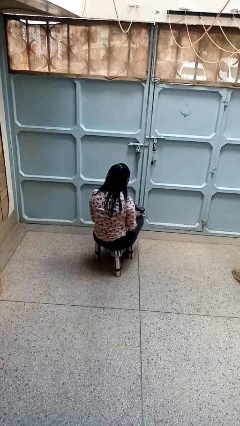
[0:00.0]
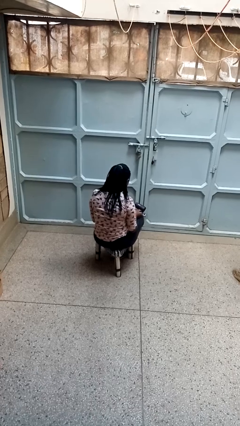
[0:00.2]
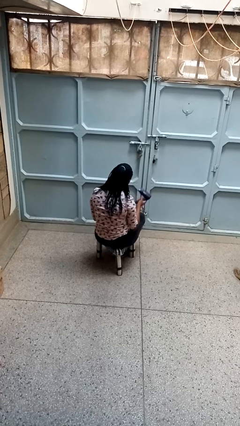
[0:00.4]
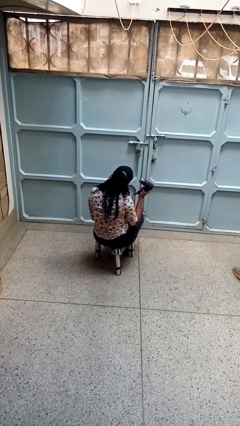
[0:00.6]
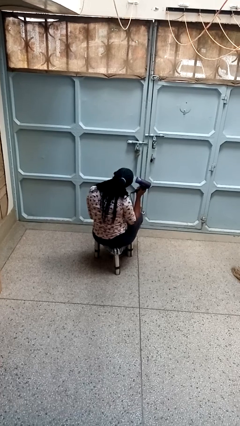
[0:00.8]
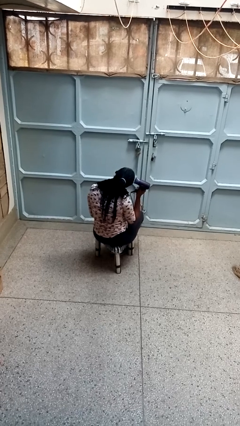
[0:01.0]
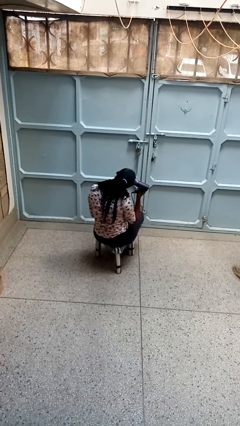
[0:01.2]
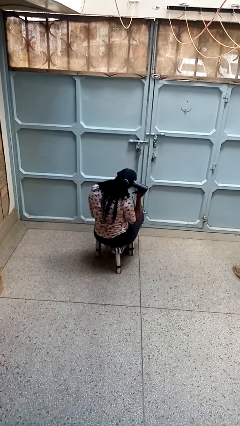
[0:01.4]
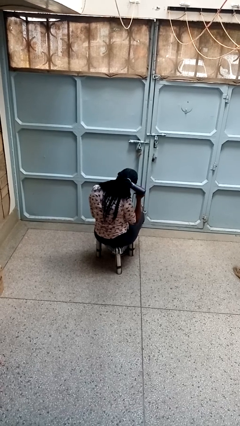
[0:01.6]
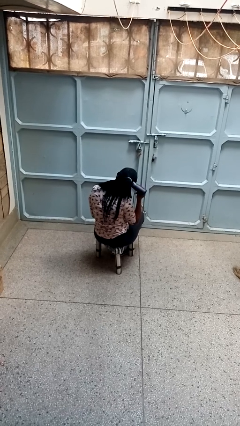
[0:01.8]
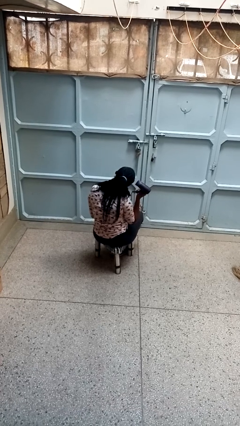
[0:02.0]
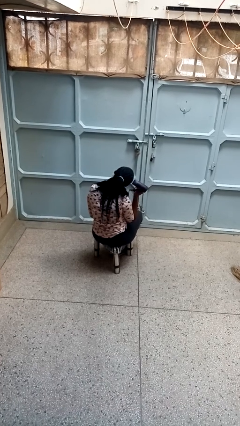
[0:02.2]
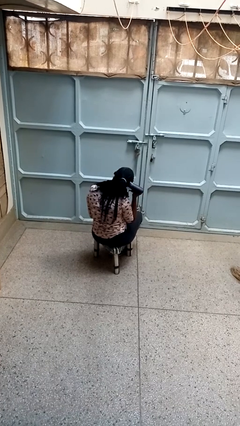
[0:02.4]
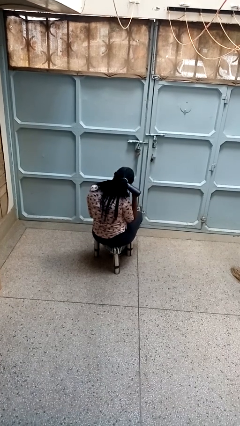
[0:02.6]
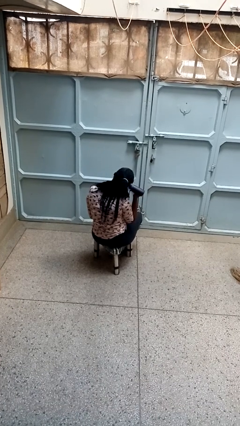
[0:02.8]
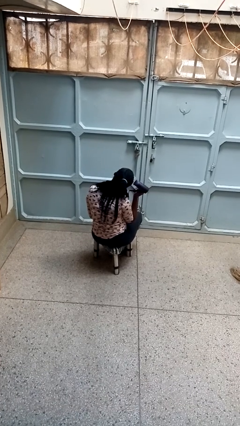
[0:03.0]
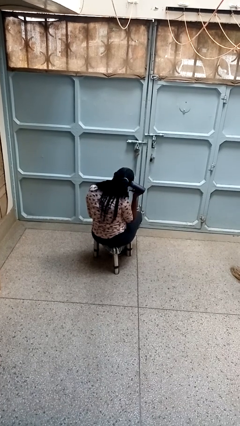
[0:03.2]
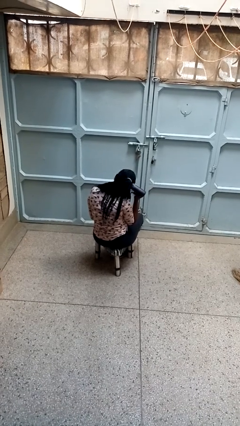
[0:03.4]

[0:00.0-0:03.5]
person dries hair with hairdryer

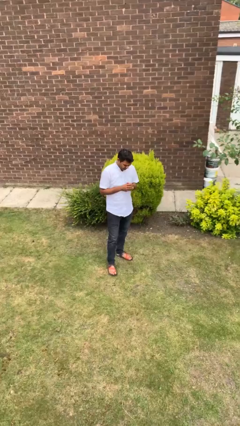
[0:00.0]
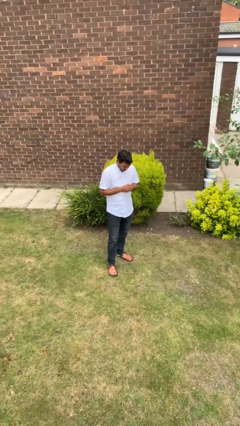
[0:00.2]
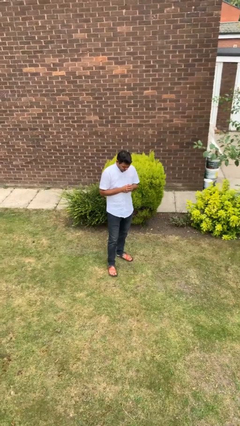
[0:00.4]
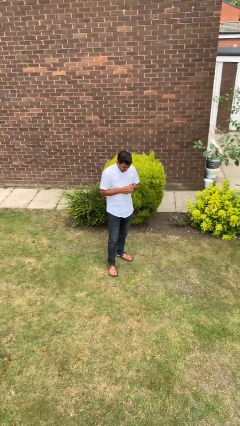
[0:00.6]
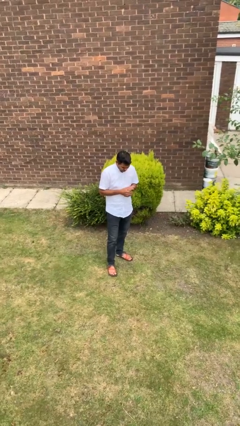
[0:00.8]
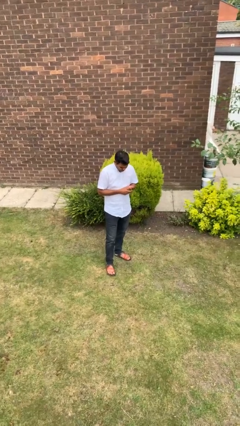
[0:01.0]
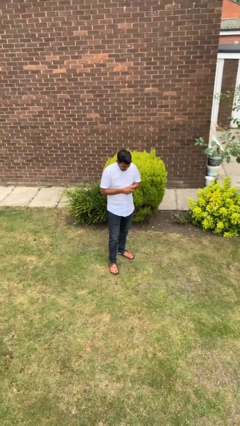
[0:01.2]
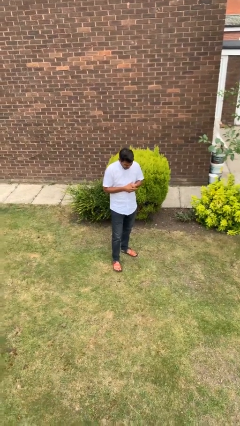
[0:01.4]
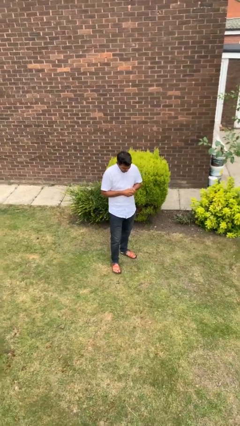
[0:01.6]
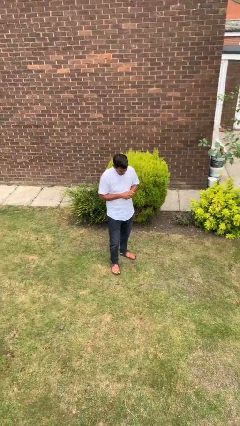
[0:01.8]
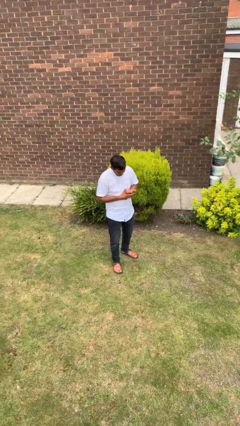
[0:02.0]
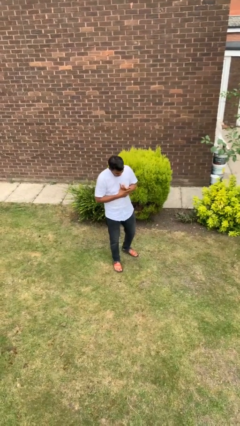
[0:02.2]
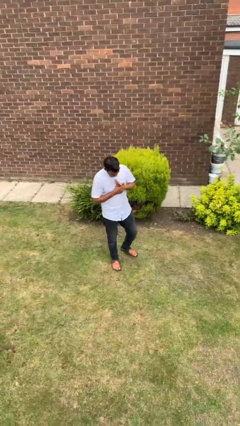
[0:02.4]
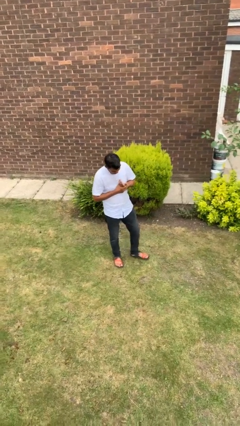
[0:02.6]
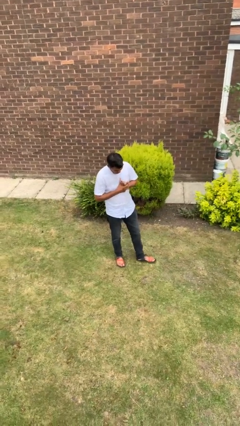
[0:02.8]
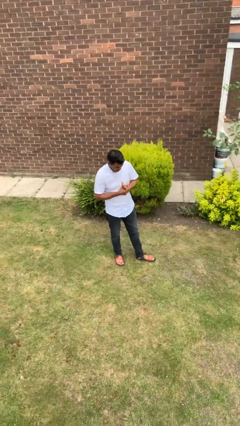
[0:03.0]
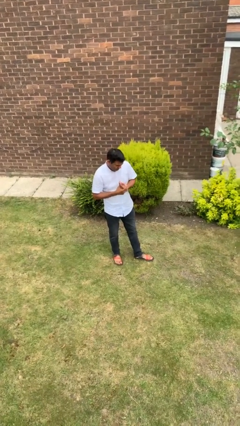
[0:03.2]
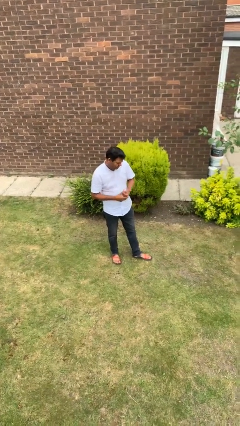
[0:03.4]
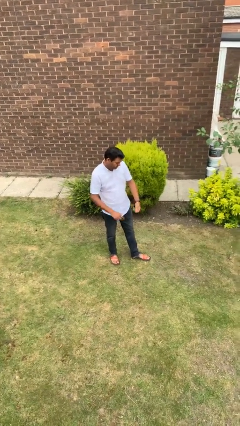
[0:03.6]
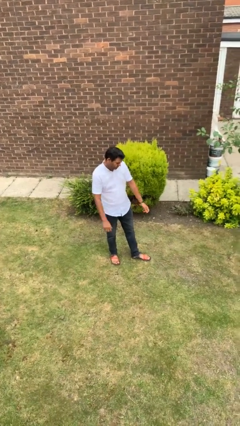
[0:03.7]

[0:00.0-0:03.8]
person cracks knuckles

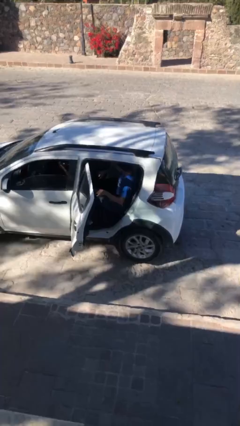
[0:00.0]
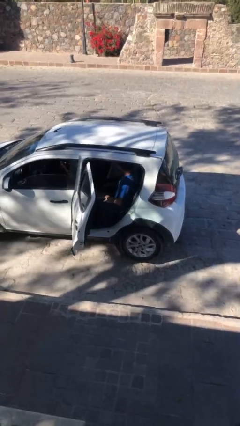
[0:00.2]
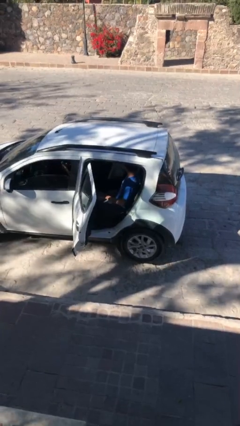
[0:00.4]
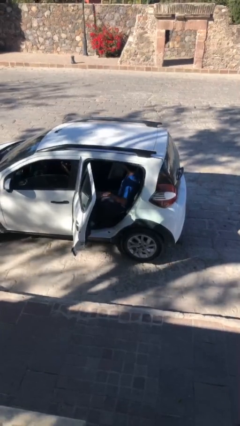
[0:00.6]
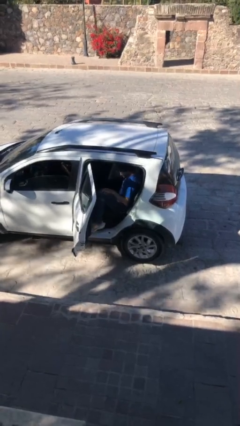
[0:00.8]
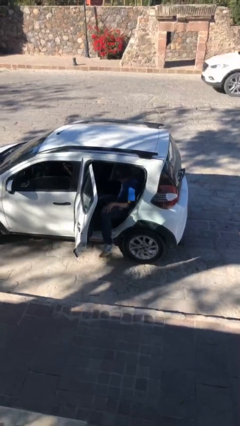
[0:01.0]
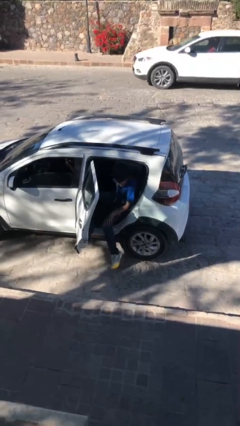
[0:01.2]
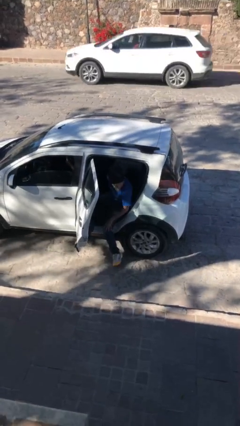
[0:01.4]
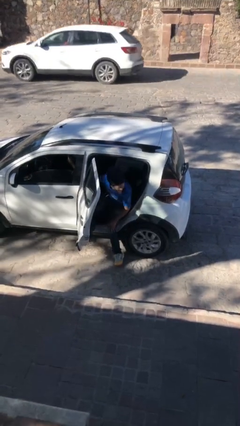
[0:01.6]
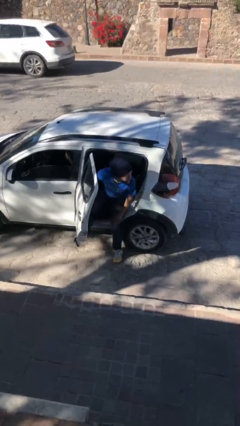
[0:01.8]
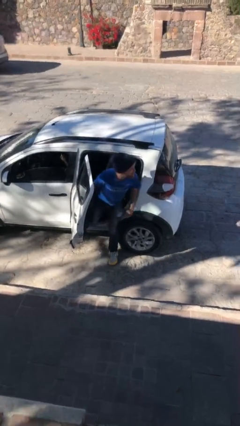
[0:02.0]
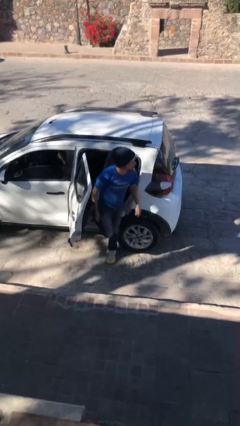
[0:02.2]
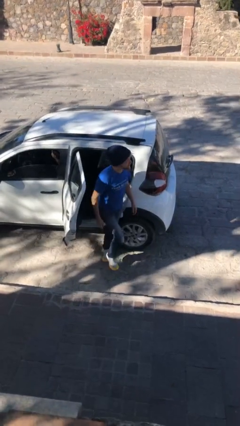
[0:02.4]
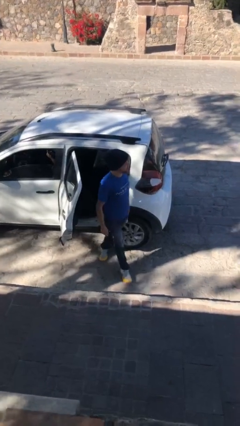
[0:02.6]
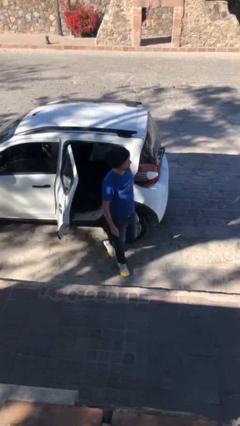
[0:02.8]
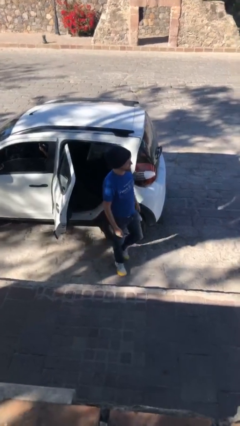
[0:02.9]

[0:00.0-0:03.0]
person exits car

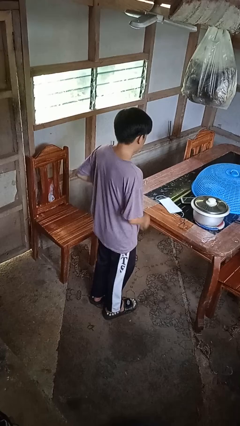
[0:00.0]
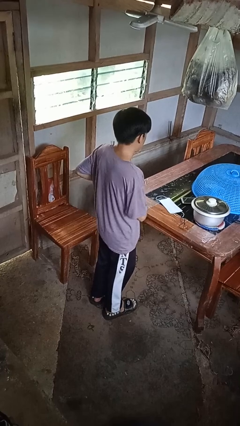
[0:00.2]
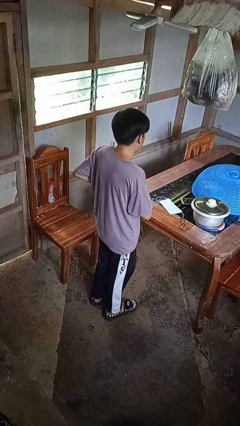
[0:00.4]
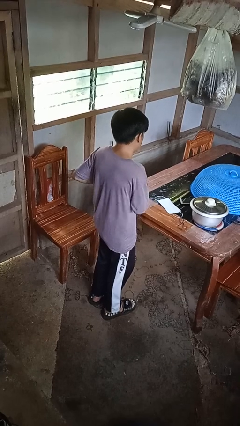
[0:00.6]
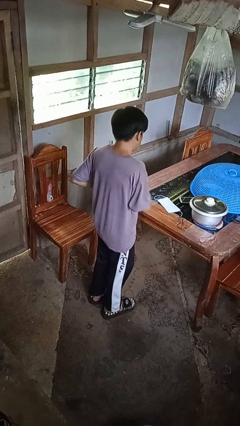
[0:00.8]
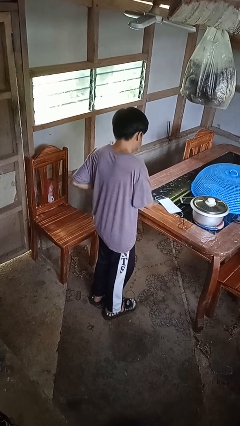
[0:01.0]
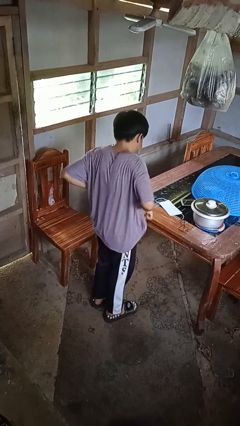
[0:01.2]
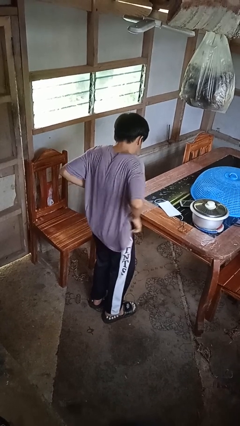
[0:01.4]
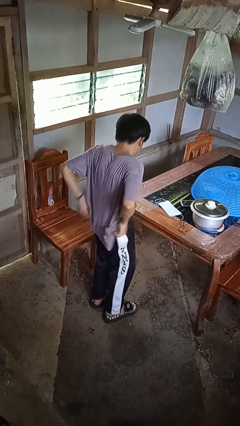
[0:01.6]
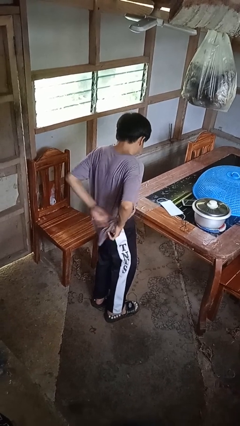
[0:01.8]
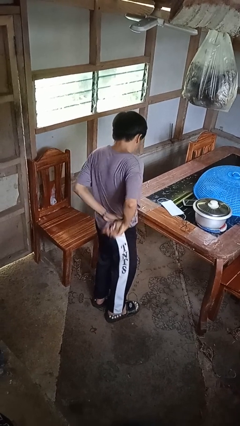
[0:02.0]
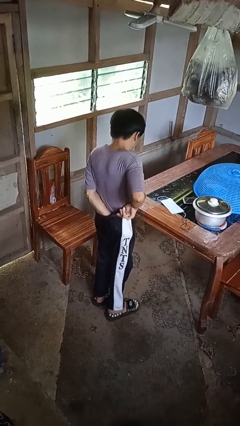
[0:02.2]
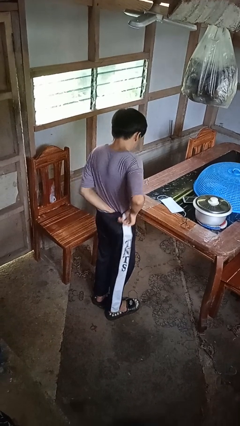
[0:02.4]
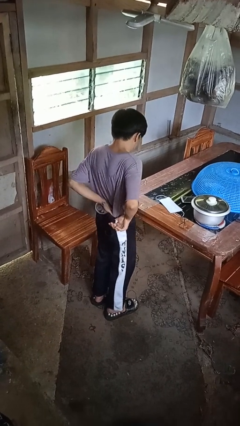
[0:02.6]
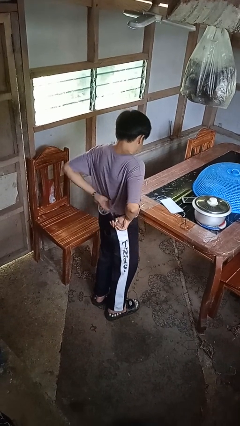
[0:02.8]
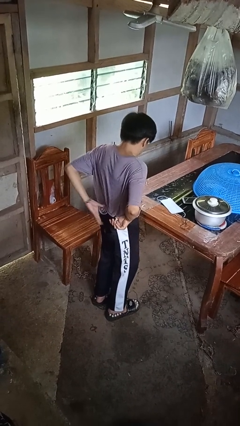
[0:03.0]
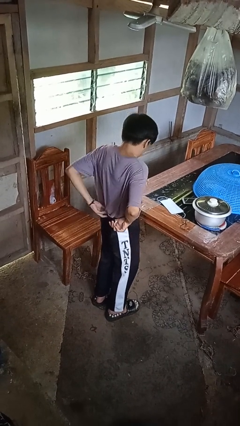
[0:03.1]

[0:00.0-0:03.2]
person tucks in shirt

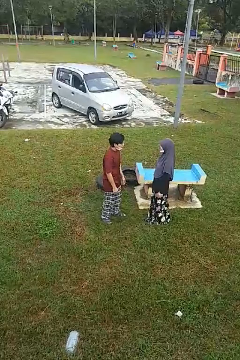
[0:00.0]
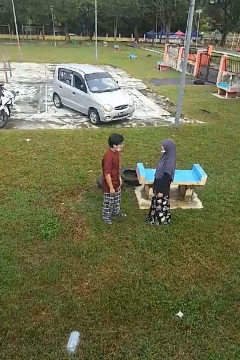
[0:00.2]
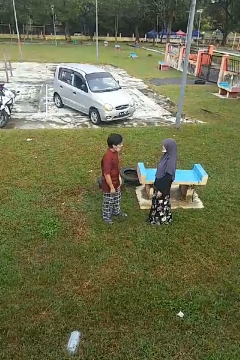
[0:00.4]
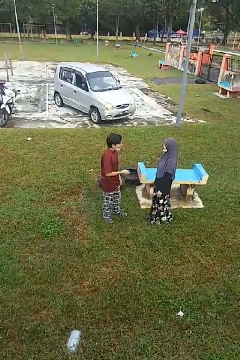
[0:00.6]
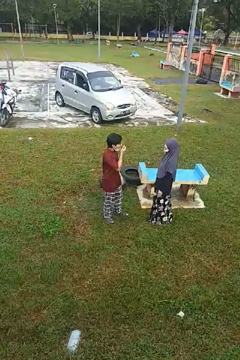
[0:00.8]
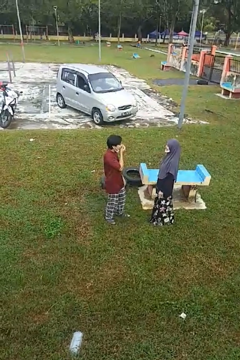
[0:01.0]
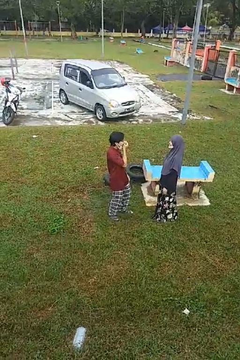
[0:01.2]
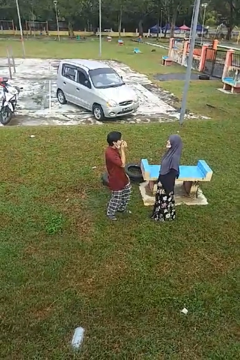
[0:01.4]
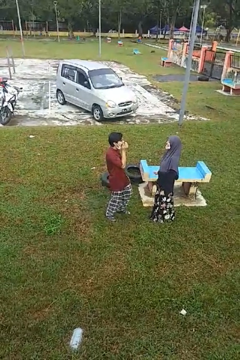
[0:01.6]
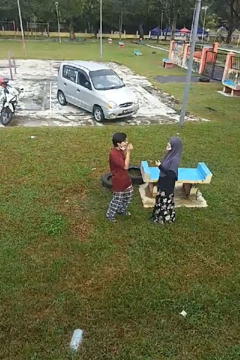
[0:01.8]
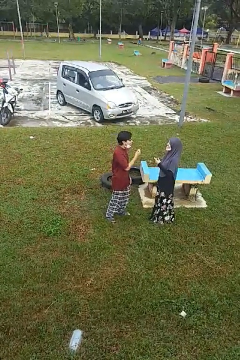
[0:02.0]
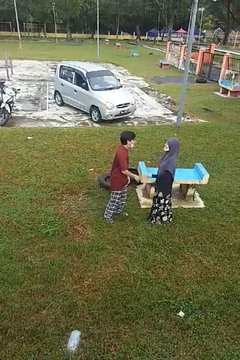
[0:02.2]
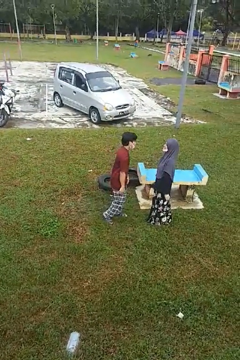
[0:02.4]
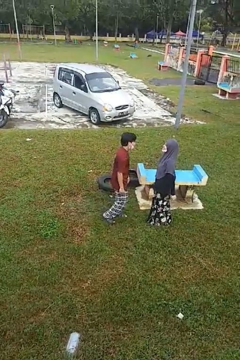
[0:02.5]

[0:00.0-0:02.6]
person laughs with person

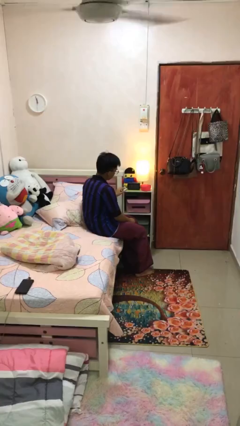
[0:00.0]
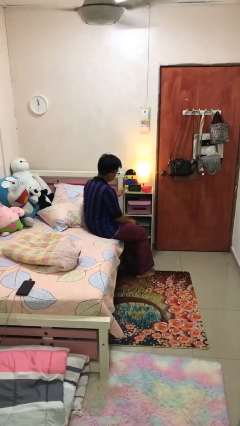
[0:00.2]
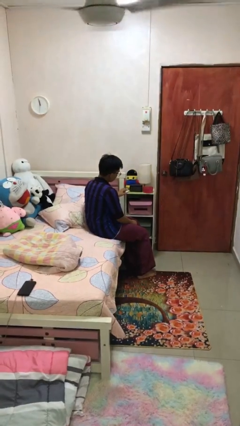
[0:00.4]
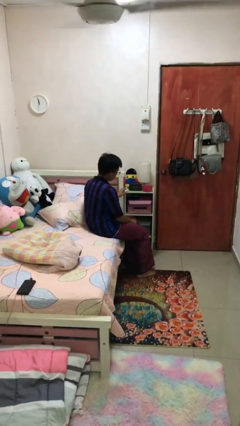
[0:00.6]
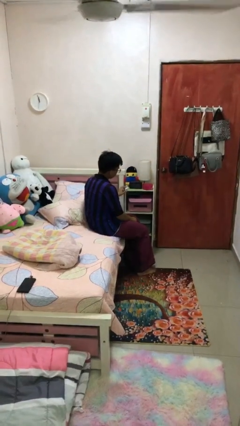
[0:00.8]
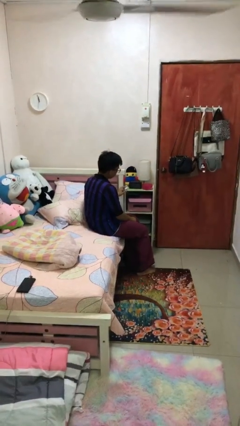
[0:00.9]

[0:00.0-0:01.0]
person turns off lamp

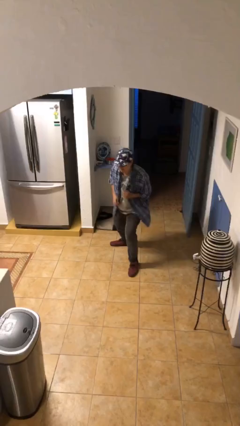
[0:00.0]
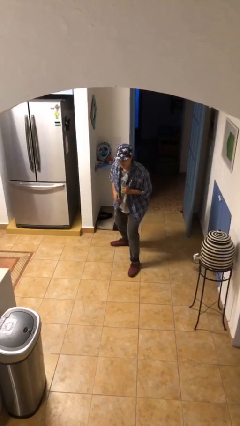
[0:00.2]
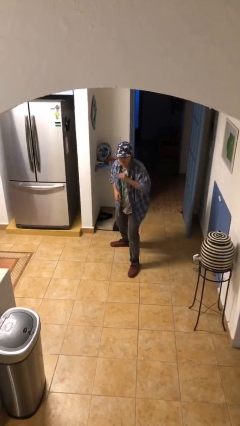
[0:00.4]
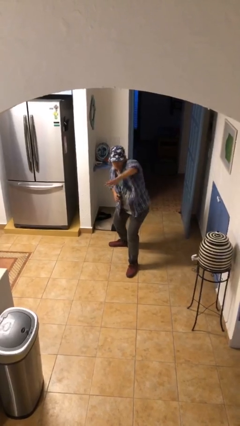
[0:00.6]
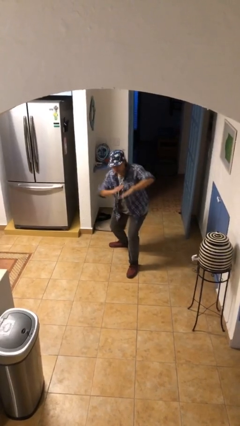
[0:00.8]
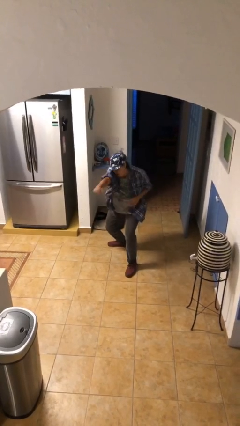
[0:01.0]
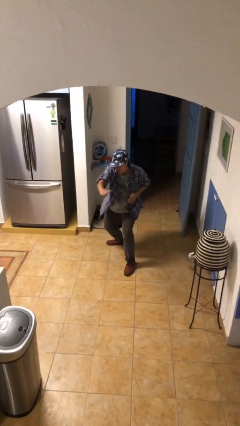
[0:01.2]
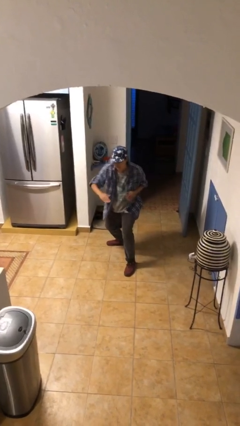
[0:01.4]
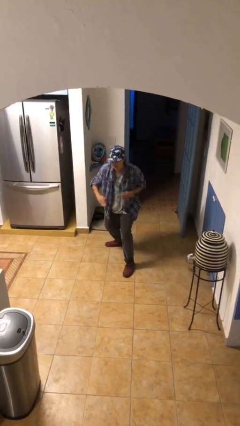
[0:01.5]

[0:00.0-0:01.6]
person karate chop
